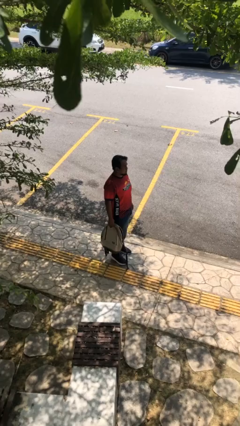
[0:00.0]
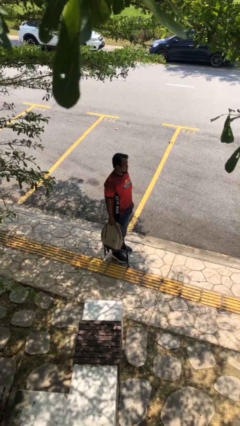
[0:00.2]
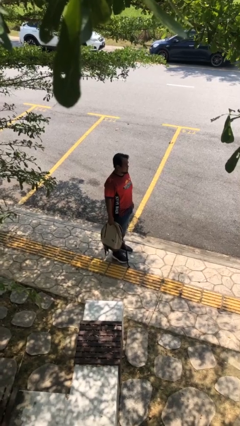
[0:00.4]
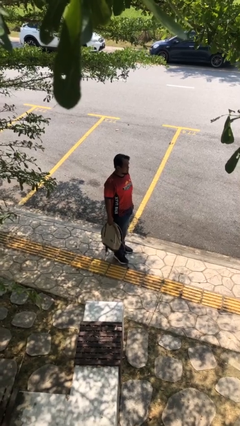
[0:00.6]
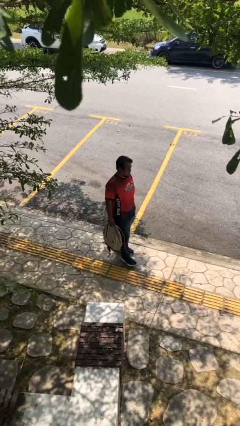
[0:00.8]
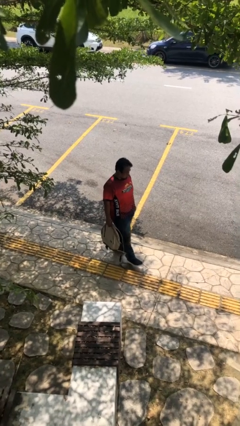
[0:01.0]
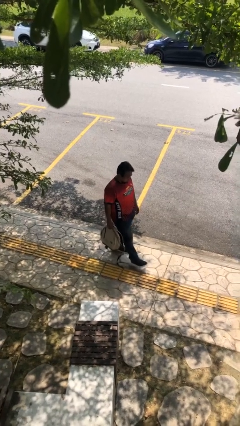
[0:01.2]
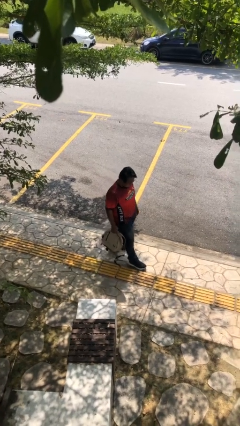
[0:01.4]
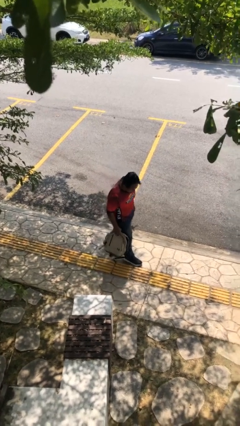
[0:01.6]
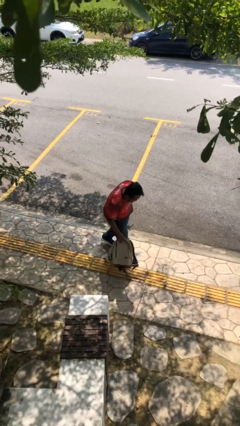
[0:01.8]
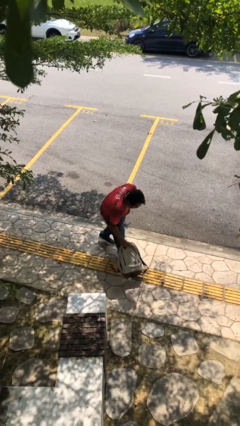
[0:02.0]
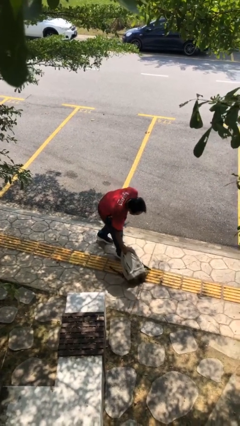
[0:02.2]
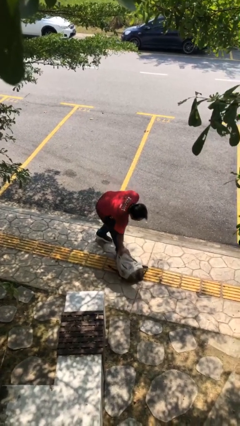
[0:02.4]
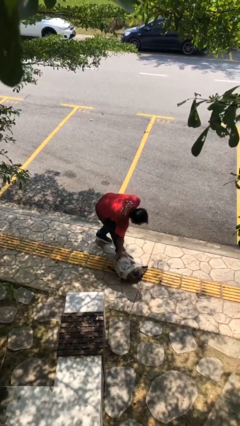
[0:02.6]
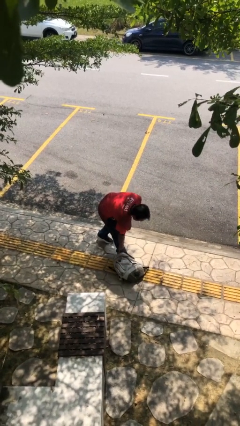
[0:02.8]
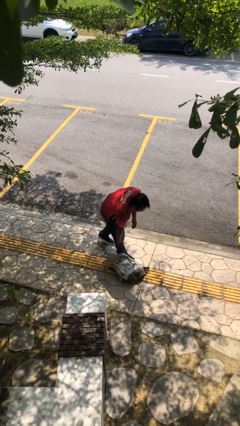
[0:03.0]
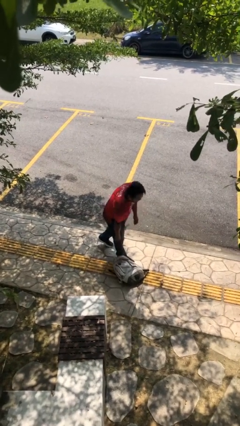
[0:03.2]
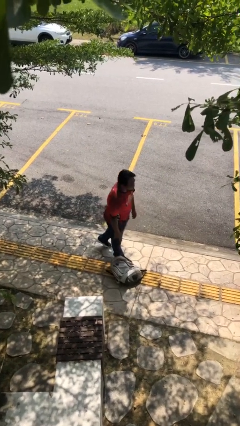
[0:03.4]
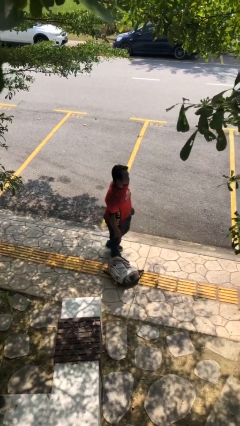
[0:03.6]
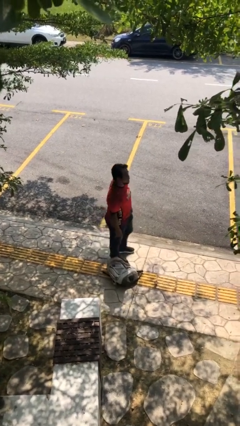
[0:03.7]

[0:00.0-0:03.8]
person puts down object on floor

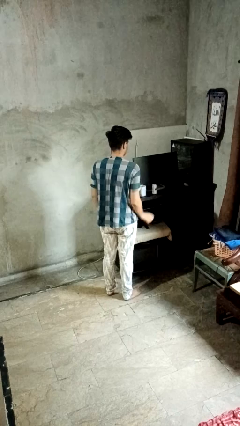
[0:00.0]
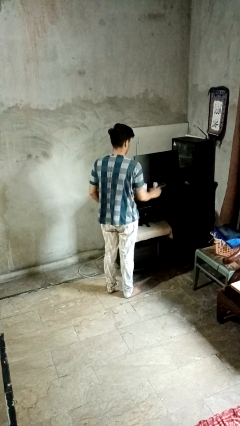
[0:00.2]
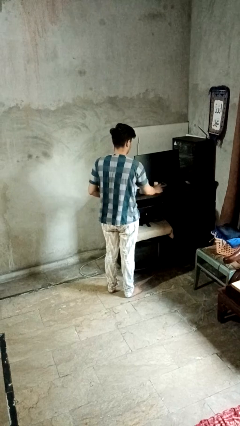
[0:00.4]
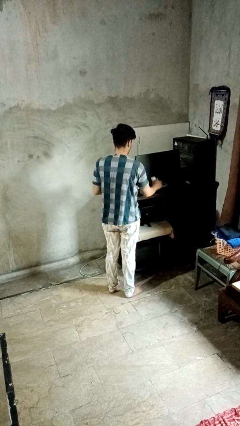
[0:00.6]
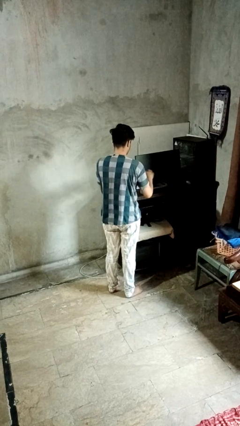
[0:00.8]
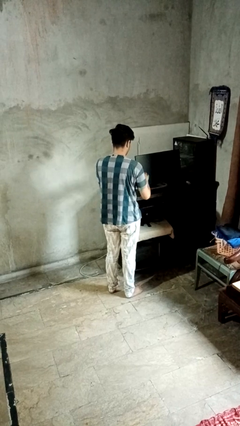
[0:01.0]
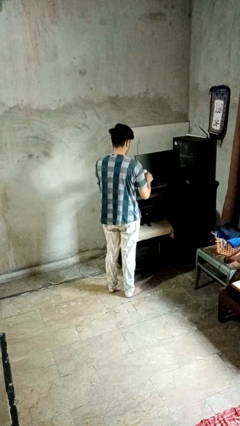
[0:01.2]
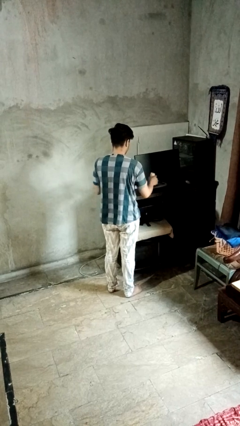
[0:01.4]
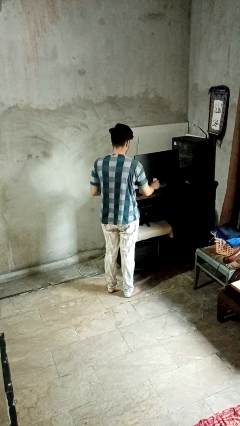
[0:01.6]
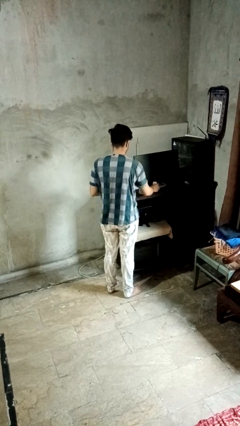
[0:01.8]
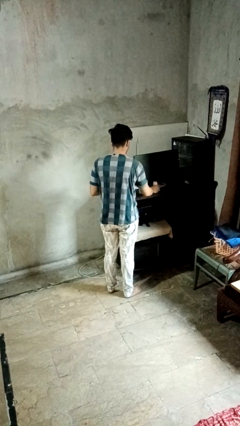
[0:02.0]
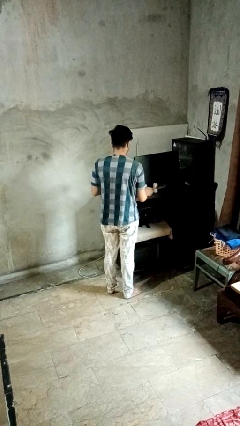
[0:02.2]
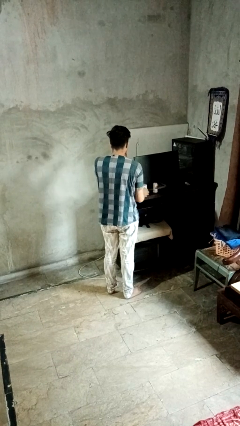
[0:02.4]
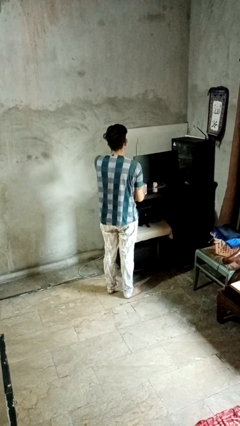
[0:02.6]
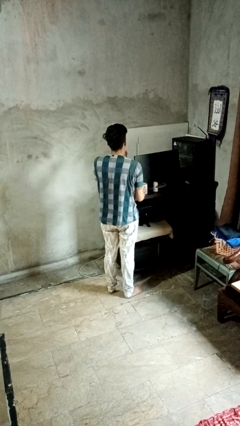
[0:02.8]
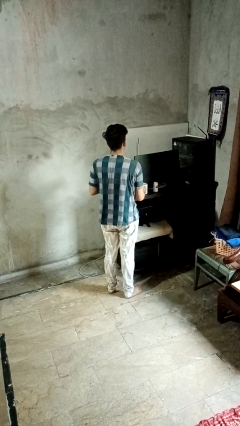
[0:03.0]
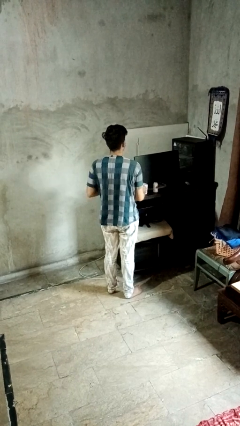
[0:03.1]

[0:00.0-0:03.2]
person takes medicine pills

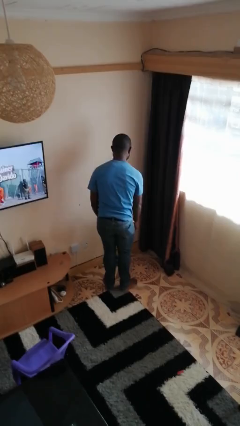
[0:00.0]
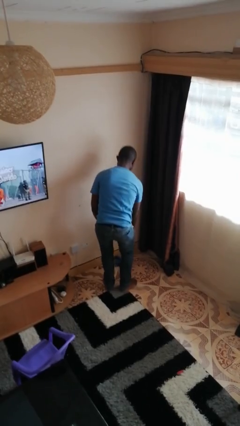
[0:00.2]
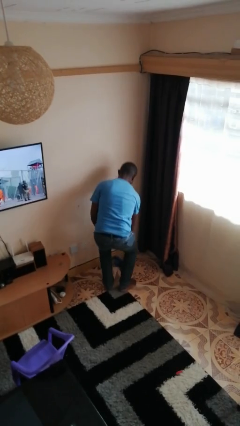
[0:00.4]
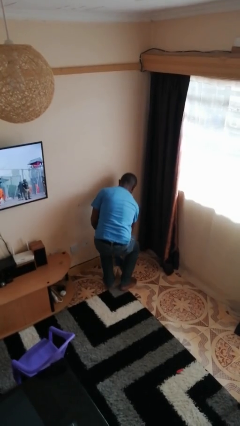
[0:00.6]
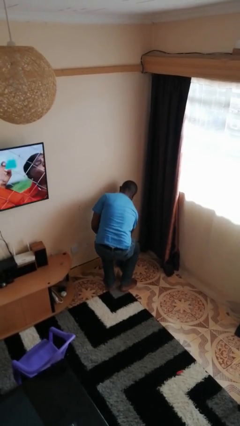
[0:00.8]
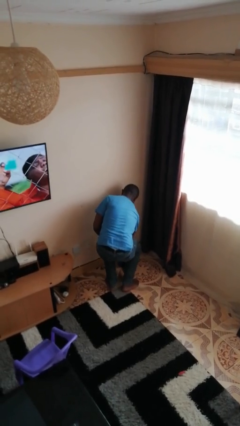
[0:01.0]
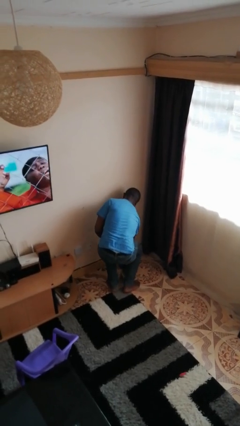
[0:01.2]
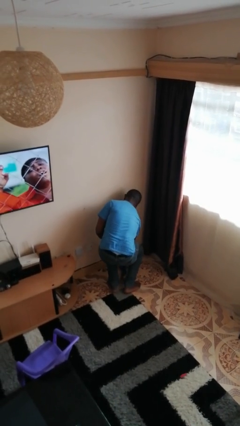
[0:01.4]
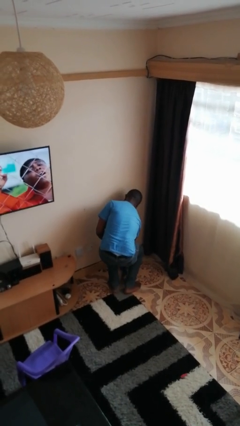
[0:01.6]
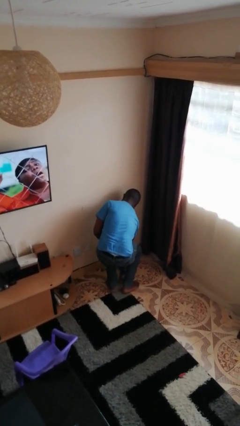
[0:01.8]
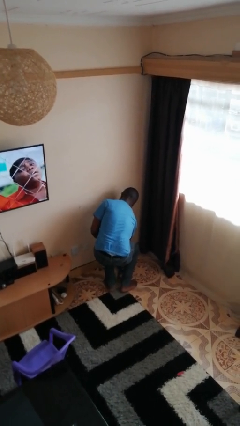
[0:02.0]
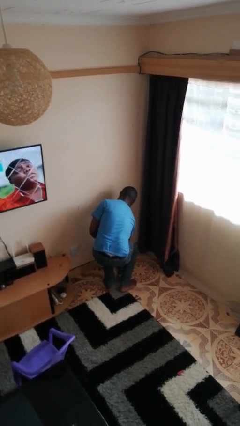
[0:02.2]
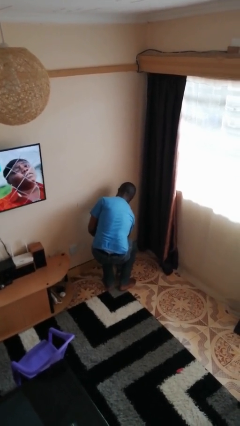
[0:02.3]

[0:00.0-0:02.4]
person picks up object from floor

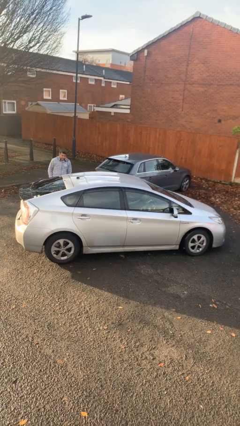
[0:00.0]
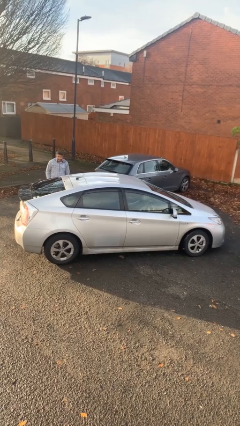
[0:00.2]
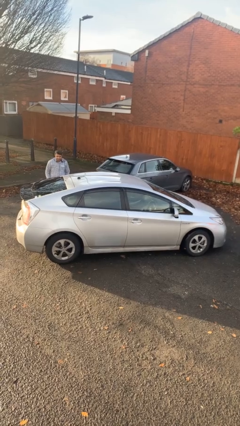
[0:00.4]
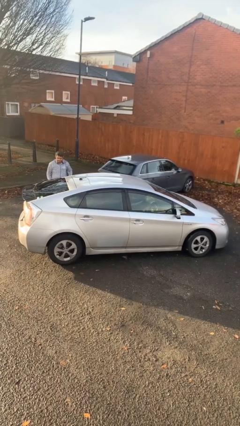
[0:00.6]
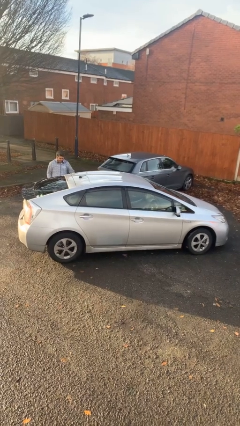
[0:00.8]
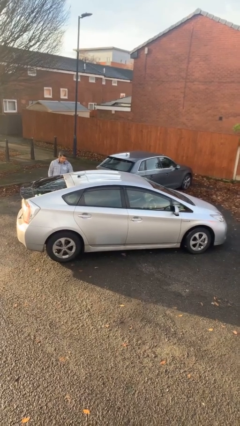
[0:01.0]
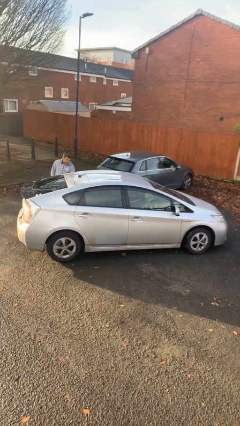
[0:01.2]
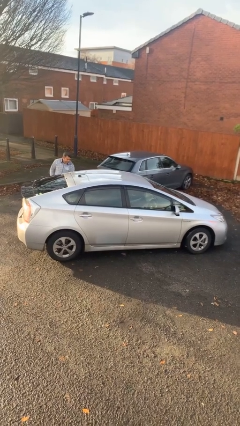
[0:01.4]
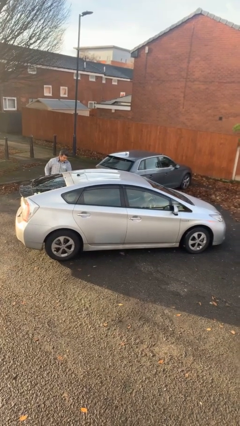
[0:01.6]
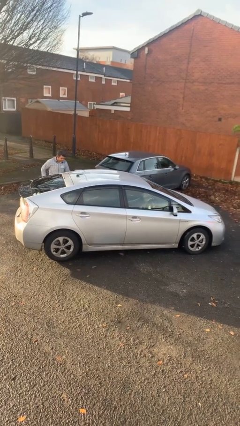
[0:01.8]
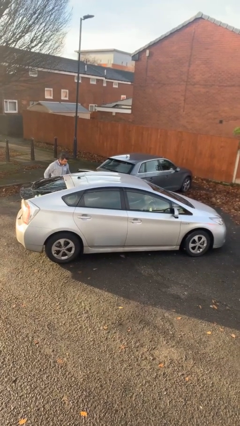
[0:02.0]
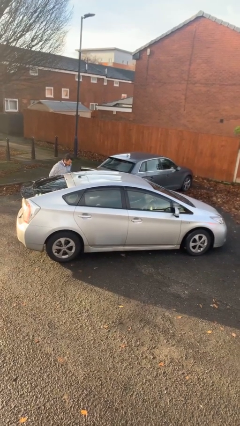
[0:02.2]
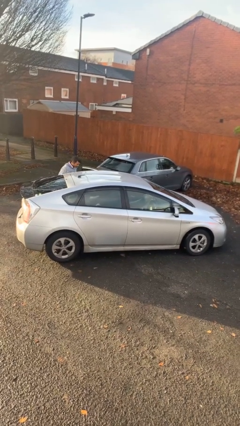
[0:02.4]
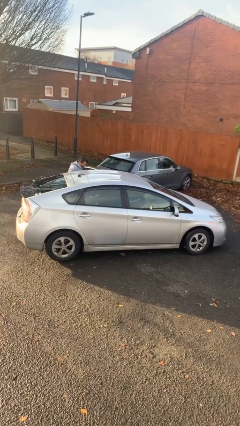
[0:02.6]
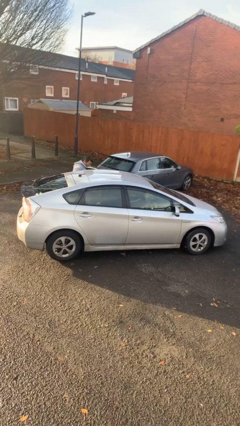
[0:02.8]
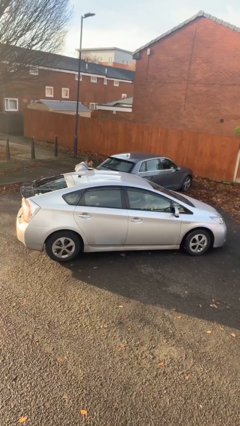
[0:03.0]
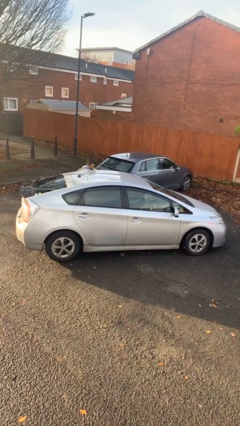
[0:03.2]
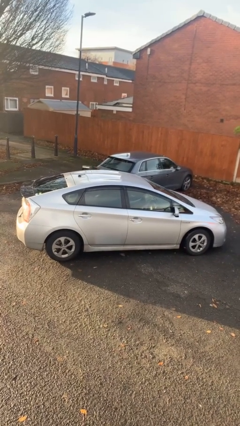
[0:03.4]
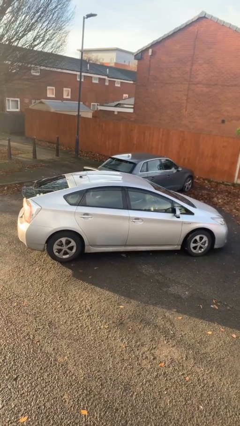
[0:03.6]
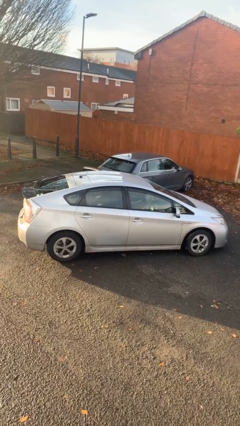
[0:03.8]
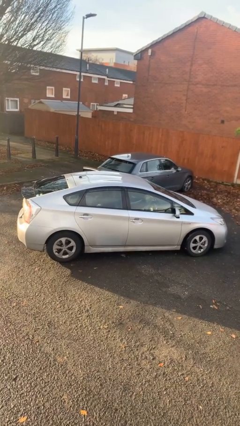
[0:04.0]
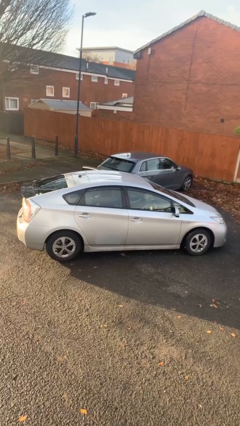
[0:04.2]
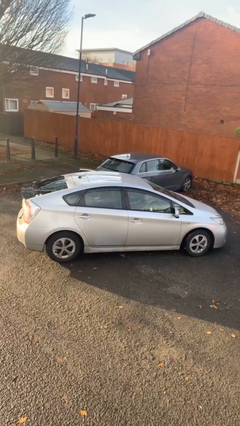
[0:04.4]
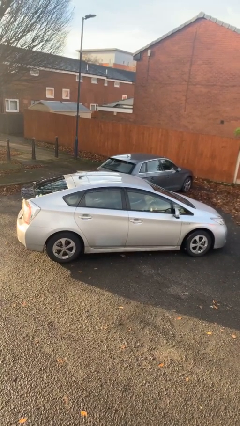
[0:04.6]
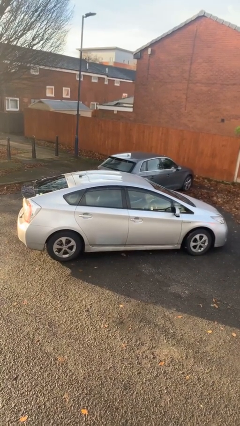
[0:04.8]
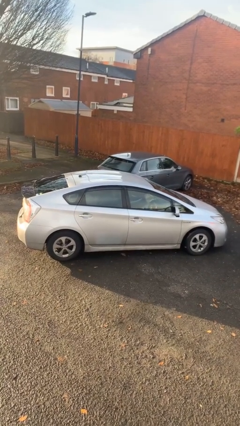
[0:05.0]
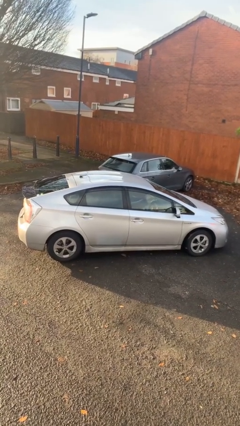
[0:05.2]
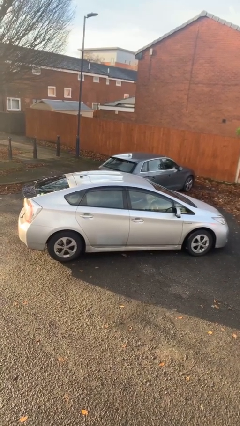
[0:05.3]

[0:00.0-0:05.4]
car picks up person

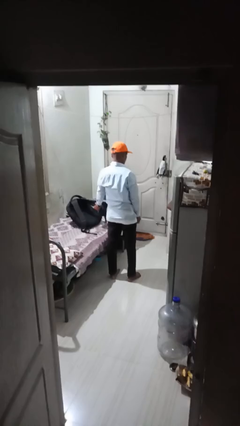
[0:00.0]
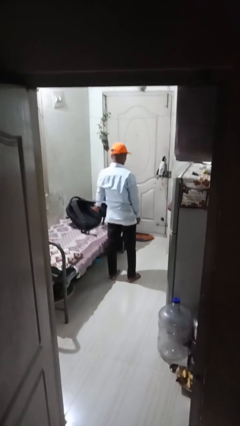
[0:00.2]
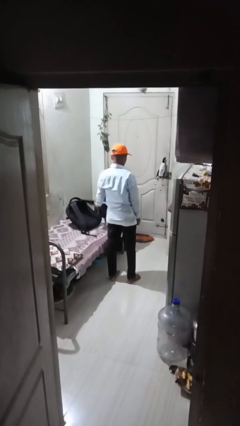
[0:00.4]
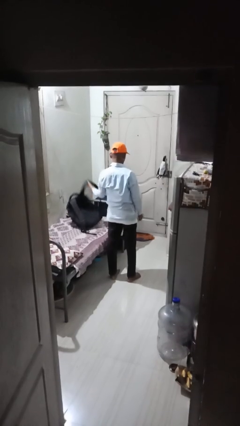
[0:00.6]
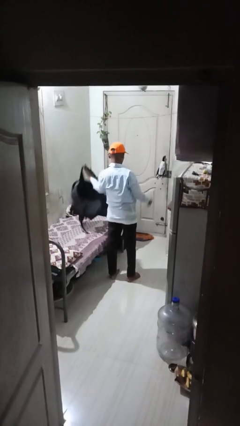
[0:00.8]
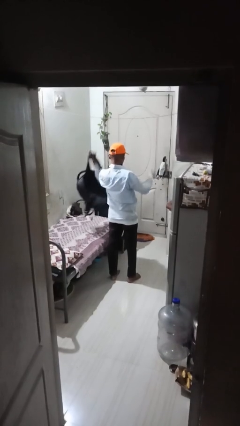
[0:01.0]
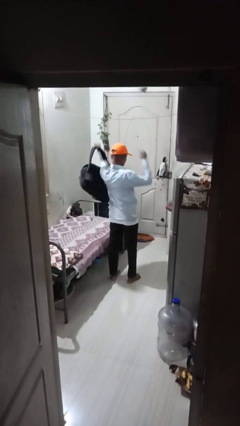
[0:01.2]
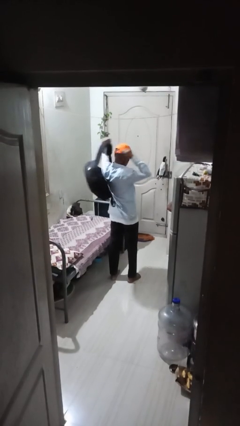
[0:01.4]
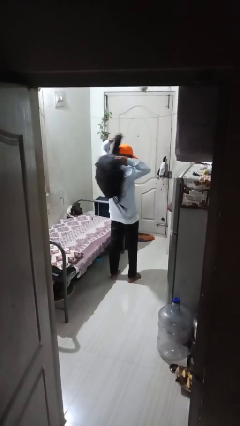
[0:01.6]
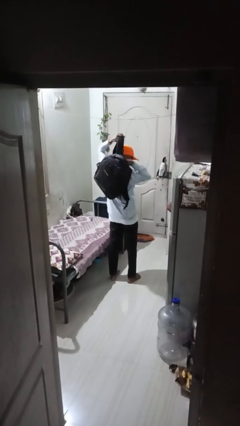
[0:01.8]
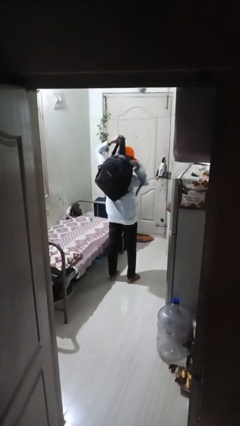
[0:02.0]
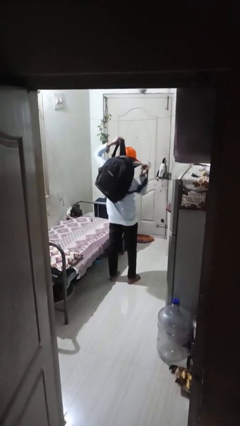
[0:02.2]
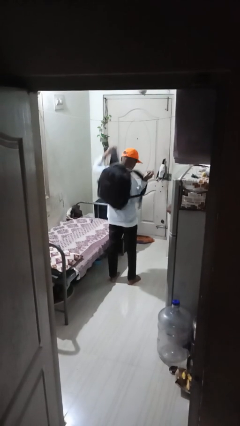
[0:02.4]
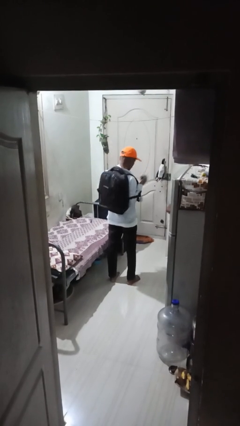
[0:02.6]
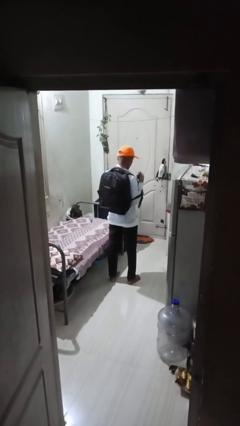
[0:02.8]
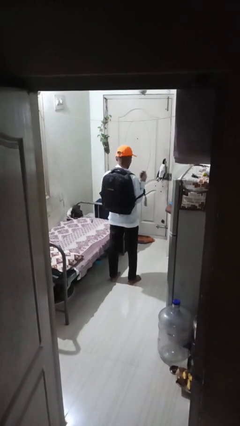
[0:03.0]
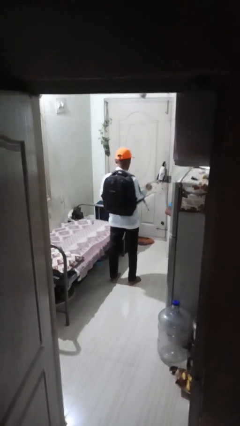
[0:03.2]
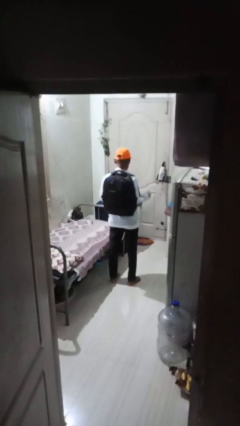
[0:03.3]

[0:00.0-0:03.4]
person puts on backpack
